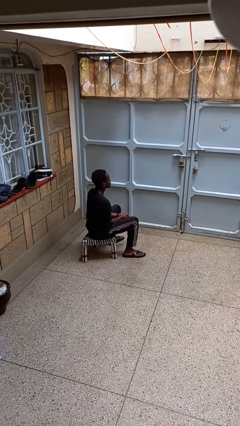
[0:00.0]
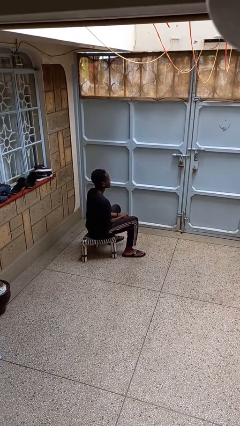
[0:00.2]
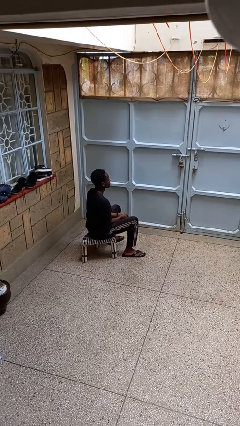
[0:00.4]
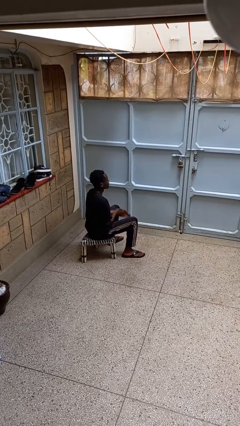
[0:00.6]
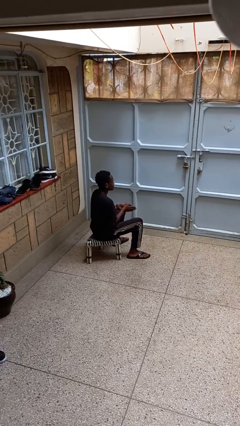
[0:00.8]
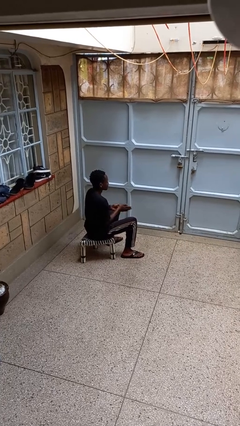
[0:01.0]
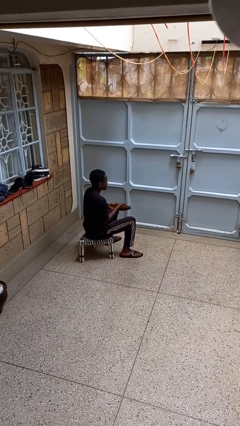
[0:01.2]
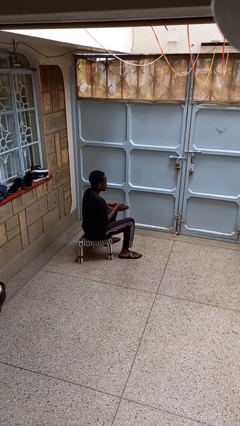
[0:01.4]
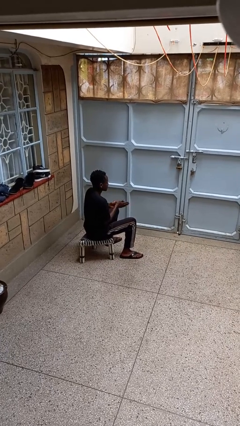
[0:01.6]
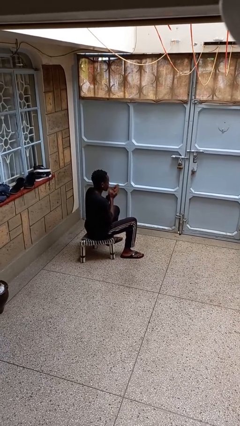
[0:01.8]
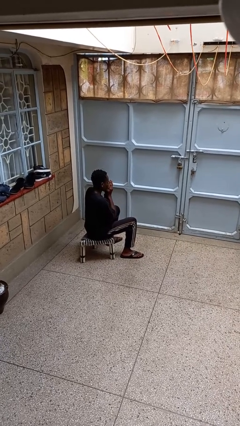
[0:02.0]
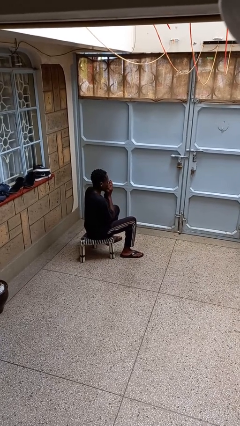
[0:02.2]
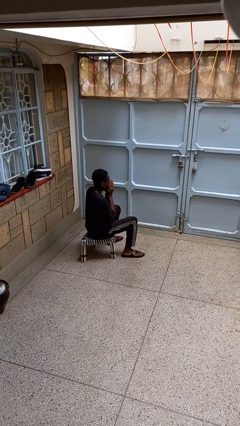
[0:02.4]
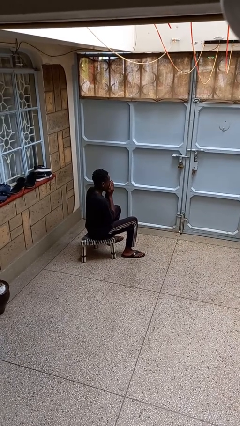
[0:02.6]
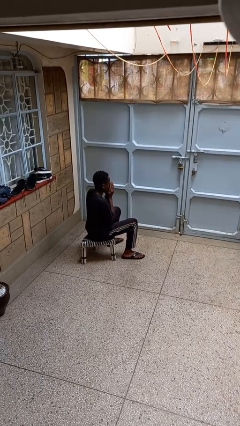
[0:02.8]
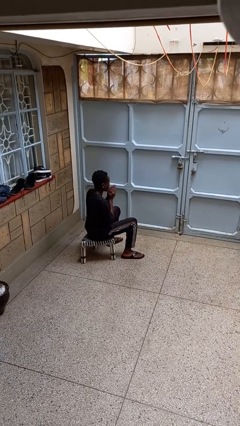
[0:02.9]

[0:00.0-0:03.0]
person blows into hands

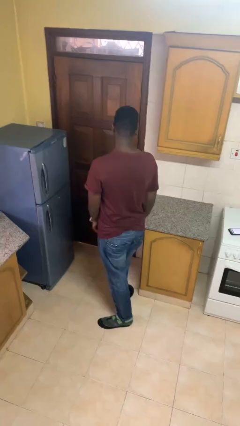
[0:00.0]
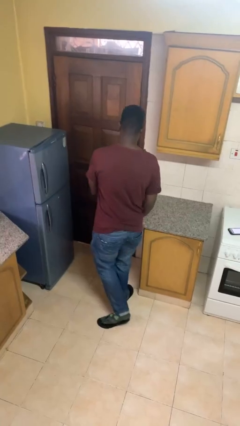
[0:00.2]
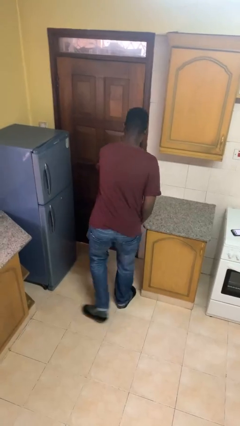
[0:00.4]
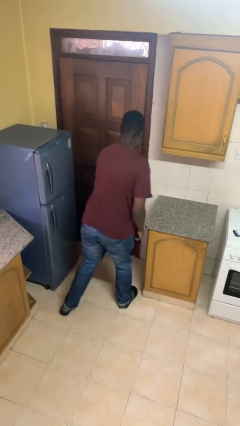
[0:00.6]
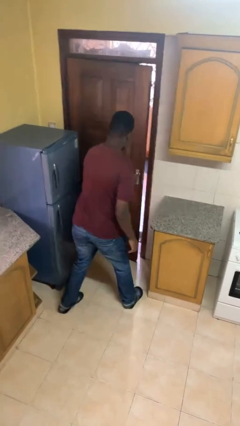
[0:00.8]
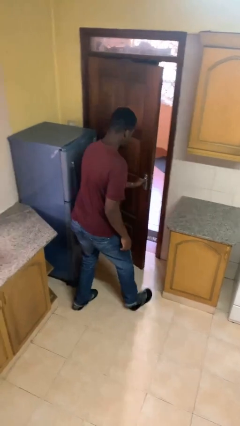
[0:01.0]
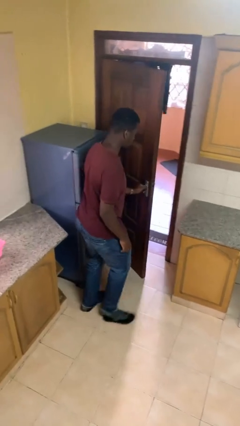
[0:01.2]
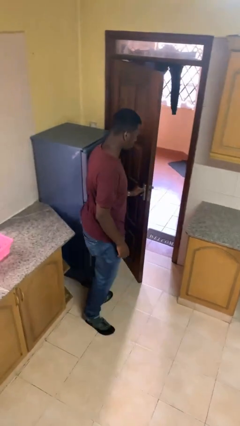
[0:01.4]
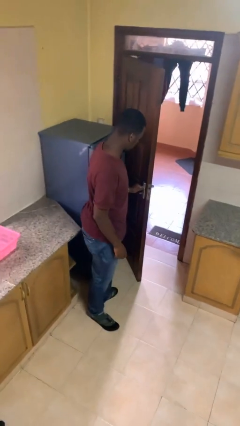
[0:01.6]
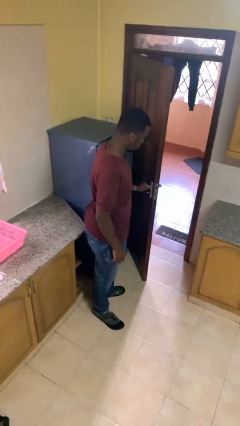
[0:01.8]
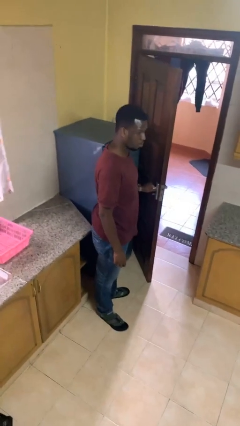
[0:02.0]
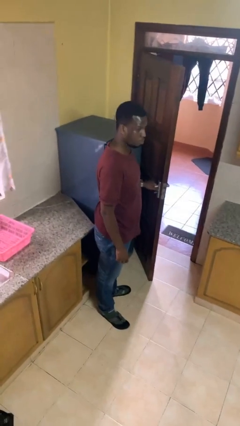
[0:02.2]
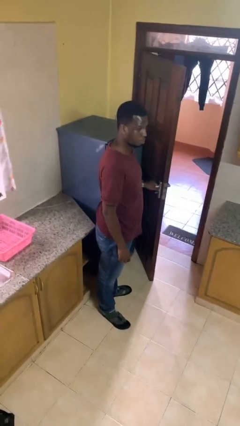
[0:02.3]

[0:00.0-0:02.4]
person opens facility door

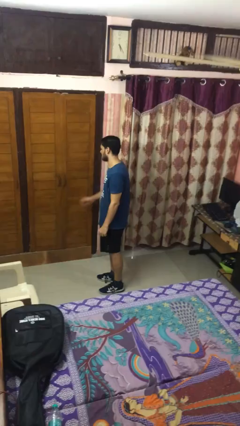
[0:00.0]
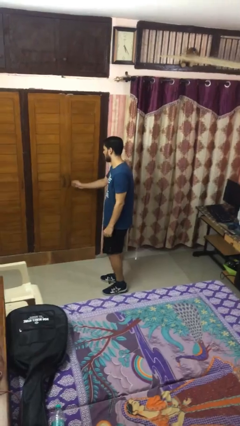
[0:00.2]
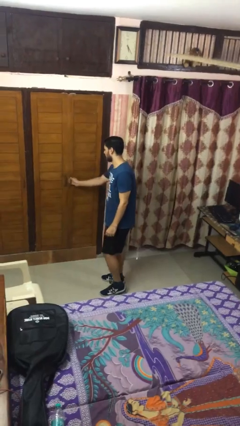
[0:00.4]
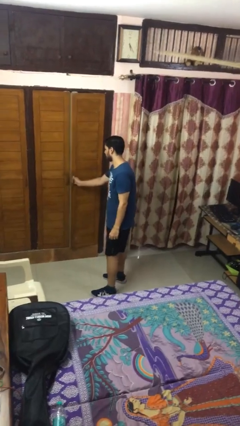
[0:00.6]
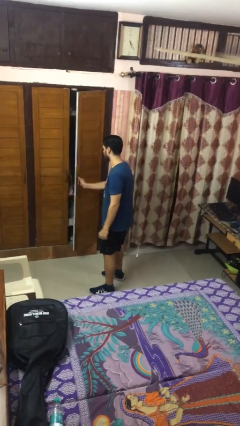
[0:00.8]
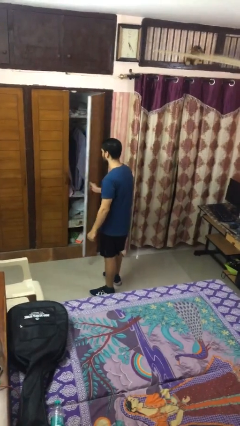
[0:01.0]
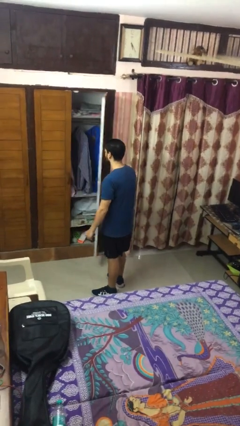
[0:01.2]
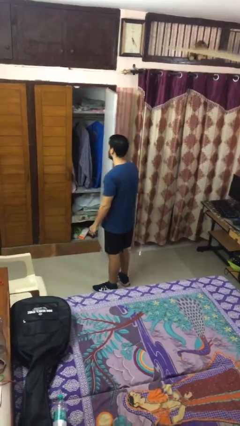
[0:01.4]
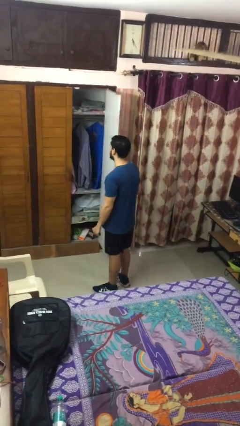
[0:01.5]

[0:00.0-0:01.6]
person opens closet door

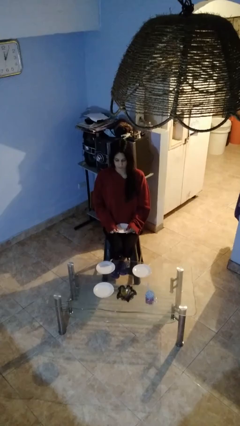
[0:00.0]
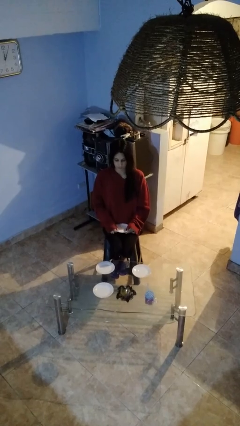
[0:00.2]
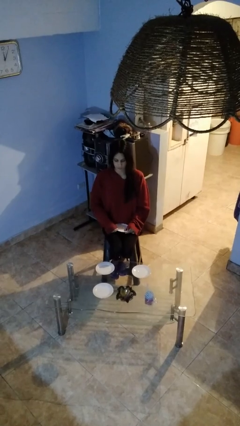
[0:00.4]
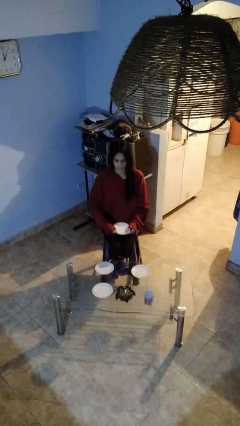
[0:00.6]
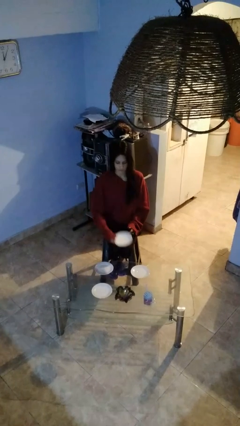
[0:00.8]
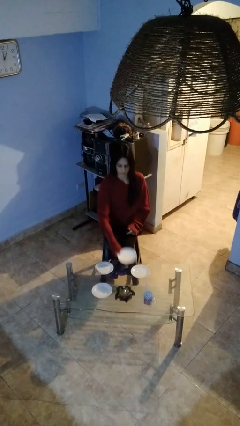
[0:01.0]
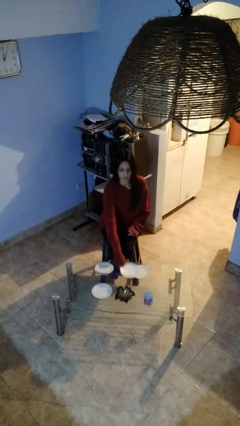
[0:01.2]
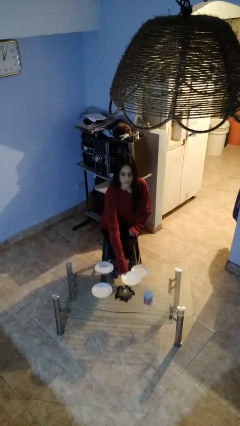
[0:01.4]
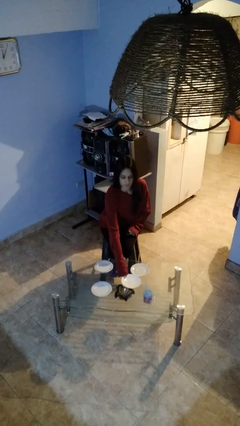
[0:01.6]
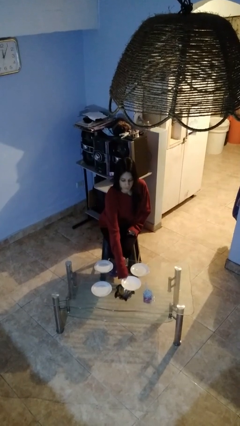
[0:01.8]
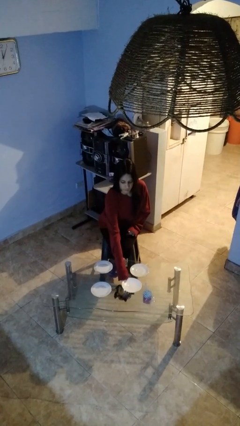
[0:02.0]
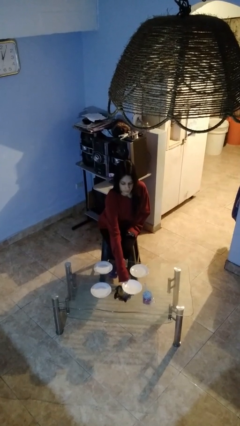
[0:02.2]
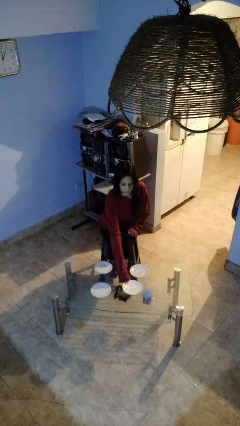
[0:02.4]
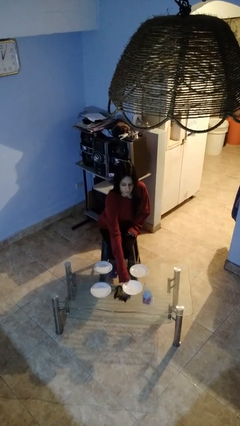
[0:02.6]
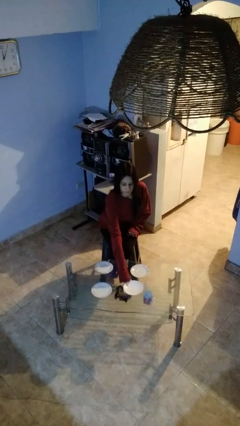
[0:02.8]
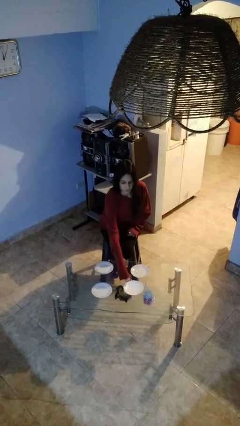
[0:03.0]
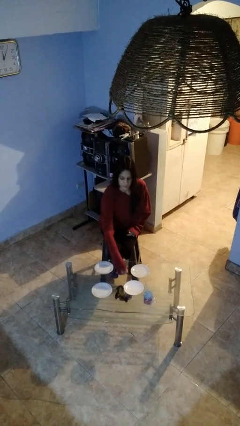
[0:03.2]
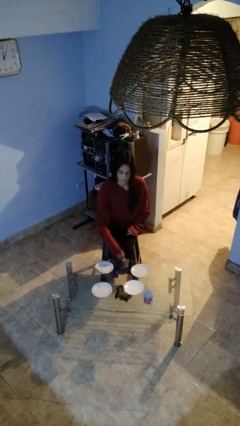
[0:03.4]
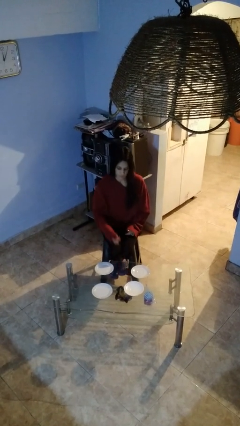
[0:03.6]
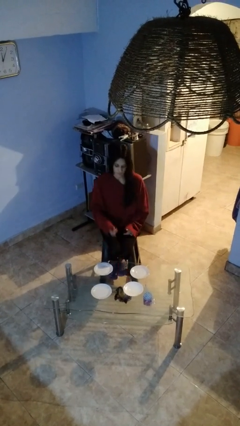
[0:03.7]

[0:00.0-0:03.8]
person sets table

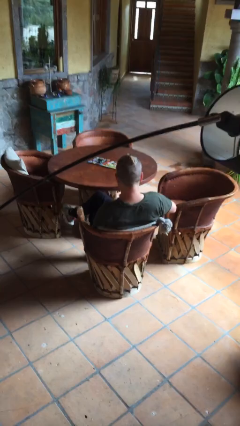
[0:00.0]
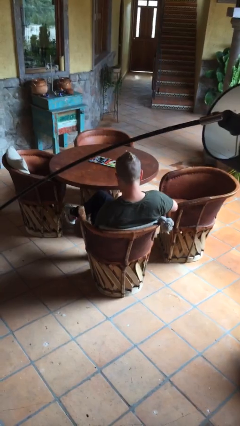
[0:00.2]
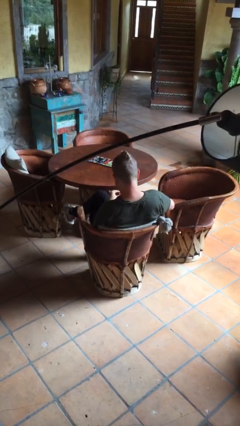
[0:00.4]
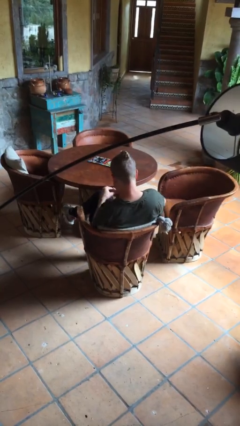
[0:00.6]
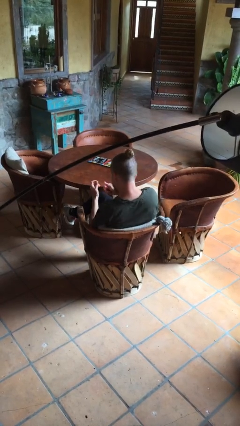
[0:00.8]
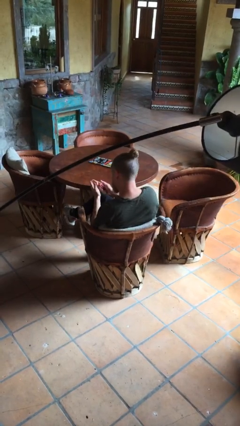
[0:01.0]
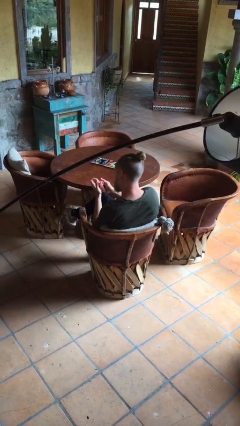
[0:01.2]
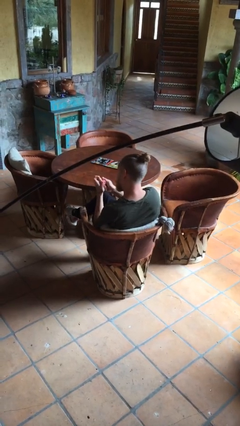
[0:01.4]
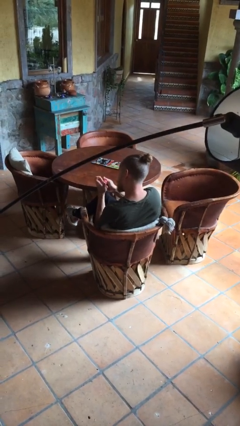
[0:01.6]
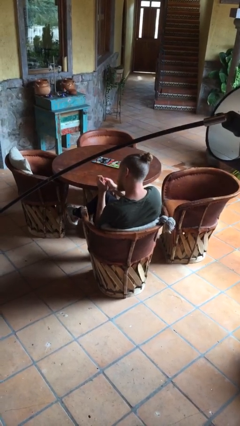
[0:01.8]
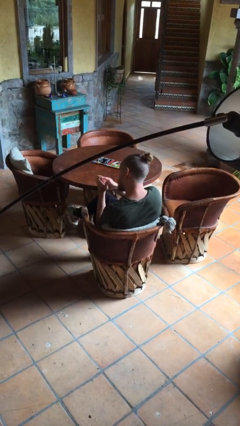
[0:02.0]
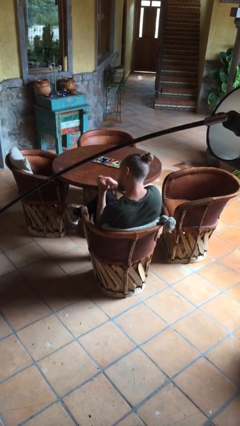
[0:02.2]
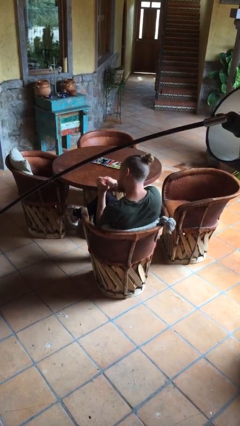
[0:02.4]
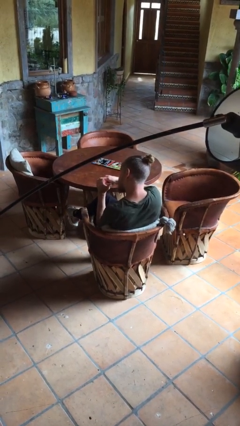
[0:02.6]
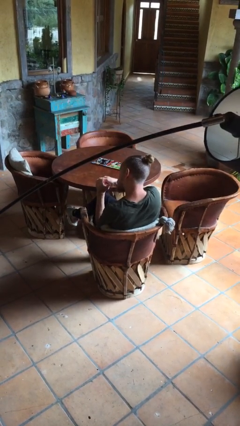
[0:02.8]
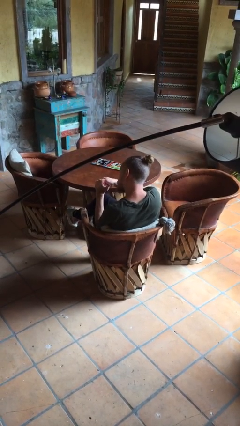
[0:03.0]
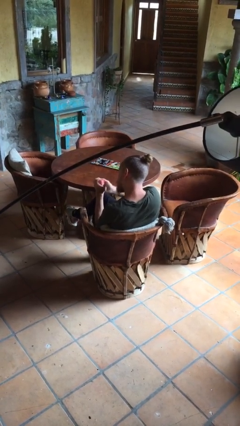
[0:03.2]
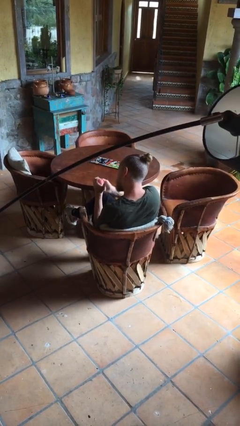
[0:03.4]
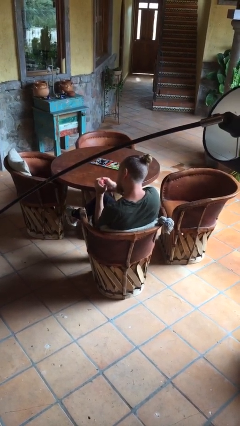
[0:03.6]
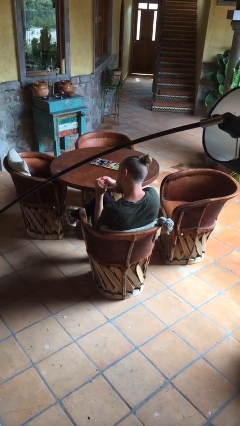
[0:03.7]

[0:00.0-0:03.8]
person clips fingernails

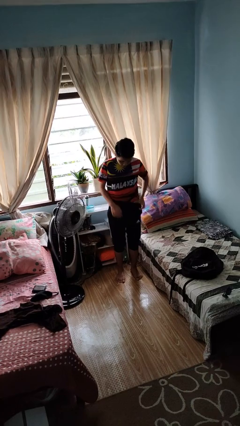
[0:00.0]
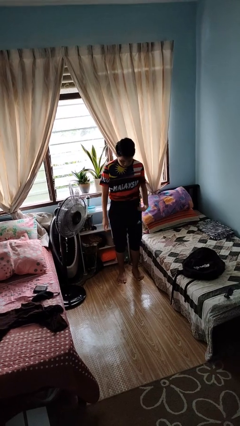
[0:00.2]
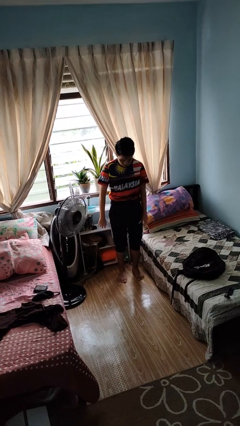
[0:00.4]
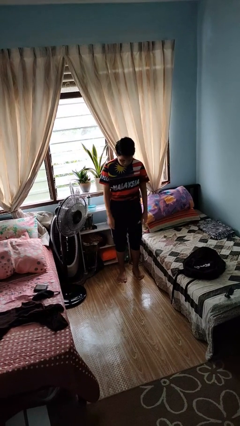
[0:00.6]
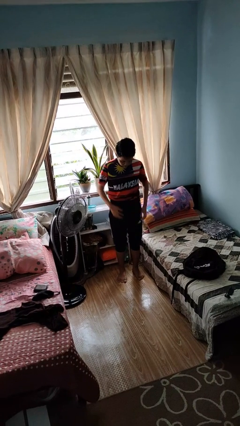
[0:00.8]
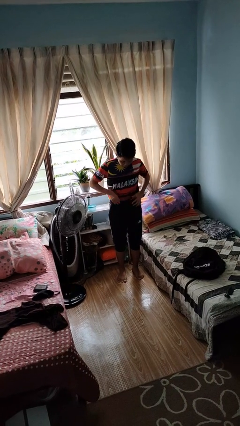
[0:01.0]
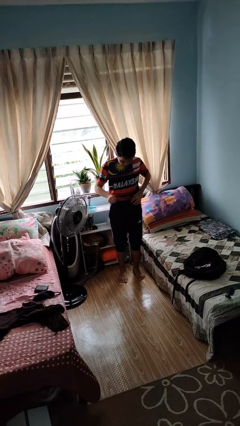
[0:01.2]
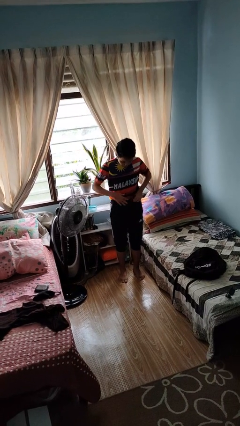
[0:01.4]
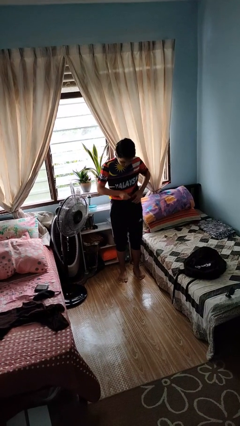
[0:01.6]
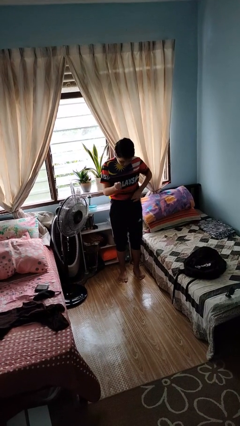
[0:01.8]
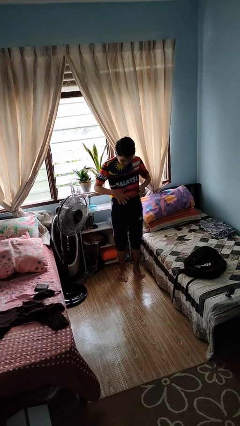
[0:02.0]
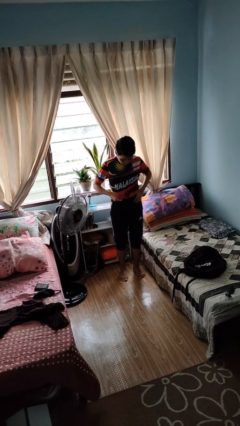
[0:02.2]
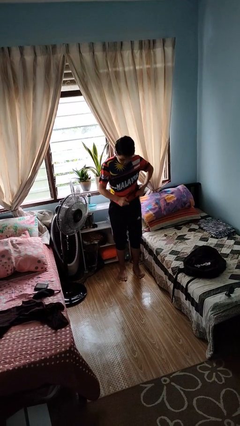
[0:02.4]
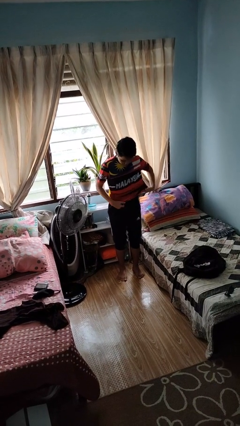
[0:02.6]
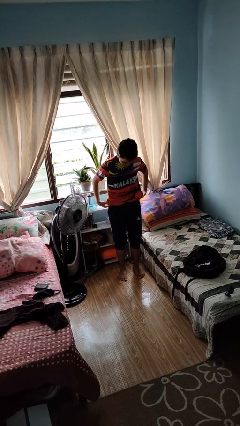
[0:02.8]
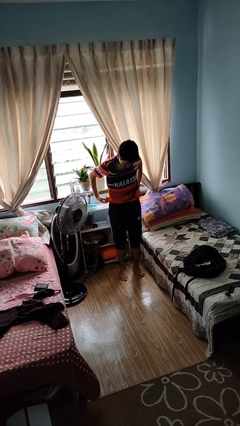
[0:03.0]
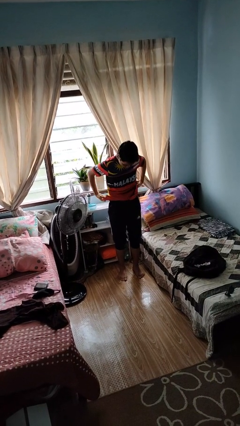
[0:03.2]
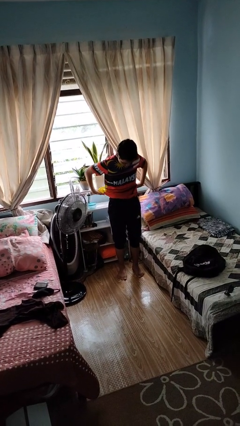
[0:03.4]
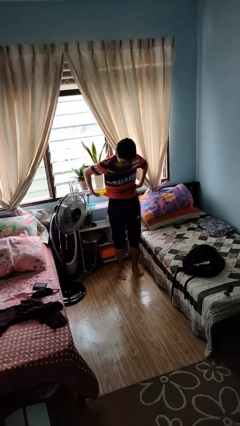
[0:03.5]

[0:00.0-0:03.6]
person untucks shirt
